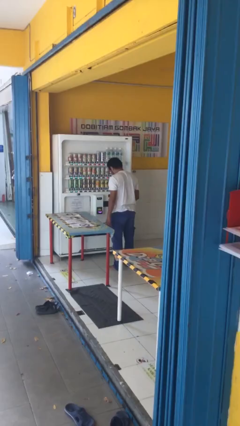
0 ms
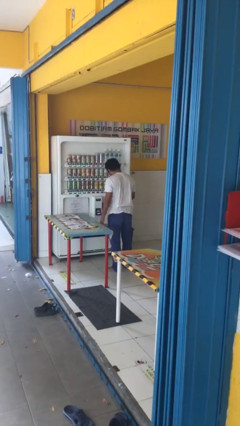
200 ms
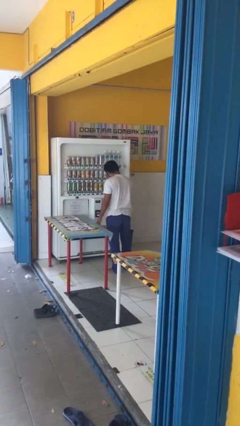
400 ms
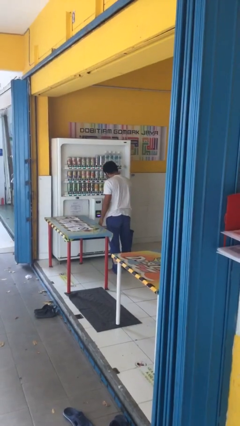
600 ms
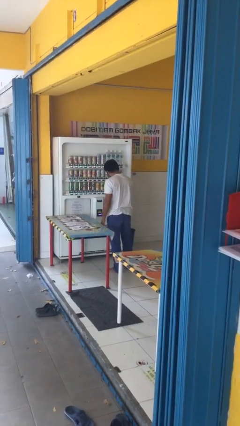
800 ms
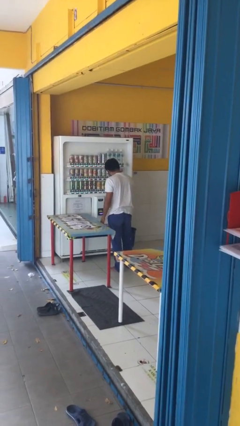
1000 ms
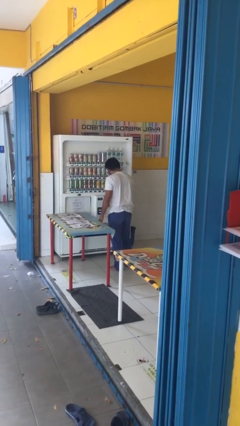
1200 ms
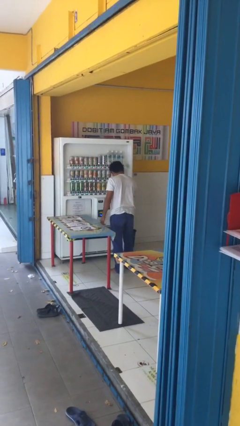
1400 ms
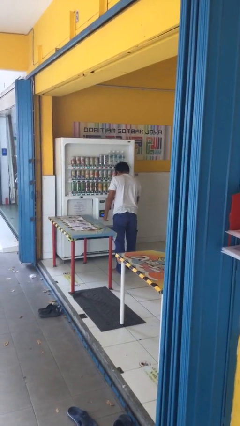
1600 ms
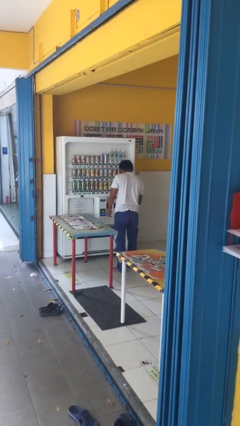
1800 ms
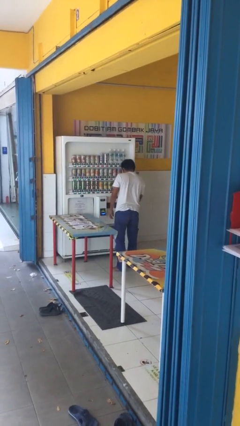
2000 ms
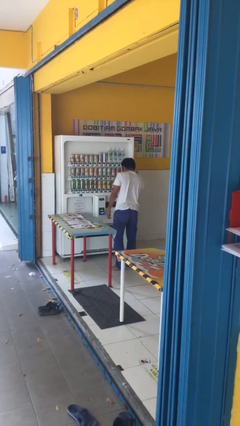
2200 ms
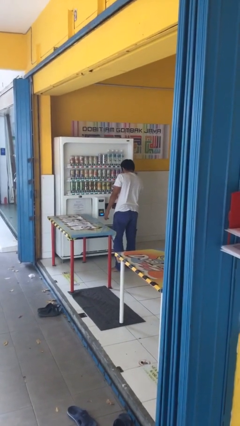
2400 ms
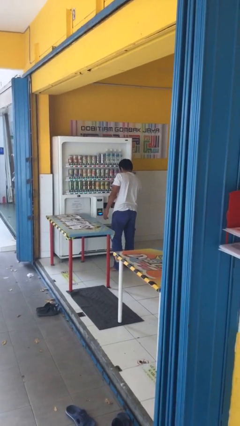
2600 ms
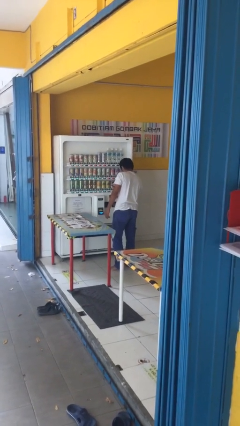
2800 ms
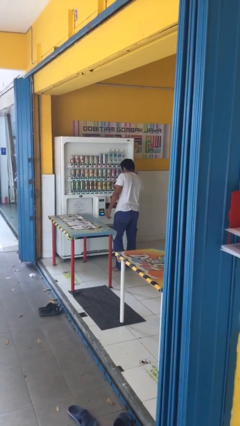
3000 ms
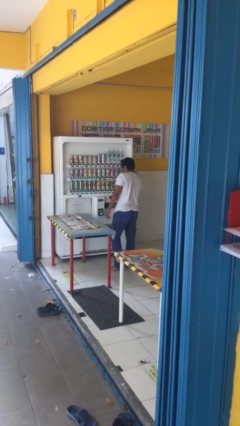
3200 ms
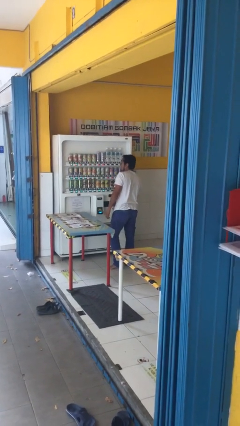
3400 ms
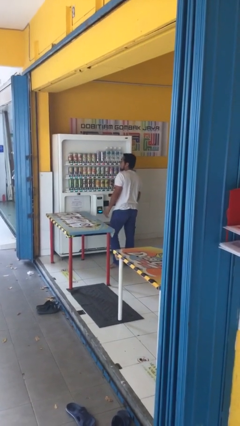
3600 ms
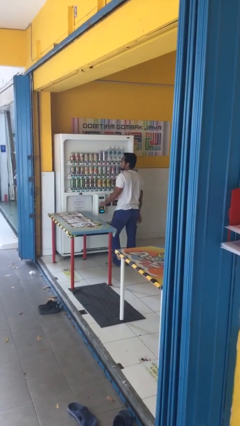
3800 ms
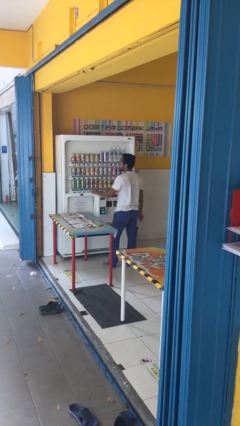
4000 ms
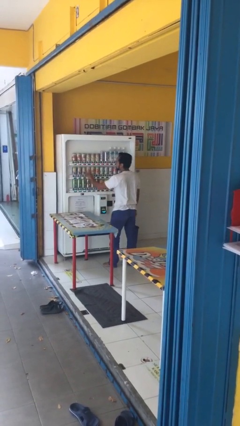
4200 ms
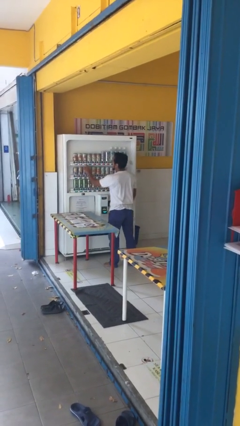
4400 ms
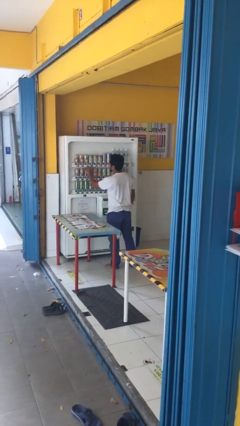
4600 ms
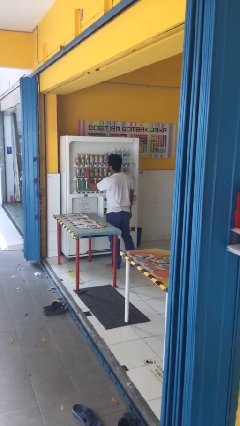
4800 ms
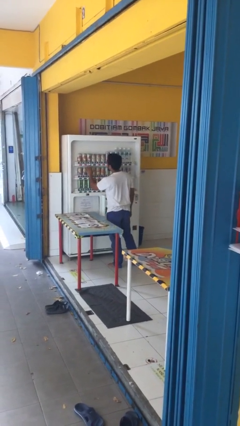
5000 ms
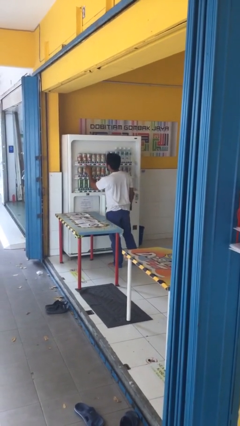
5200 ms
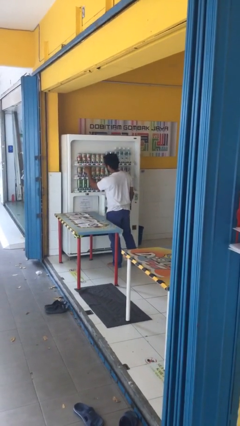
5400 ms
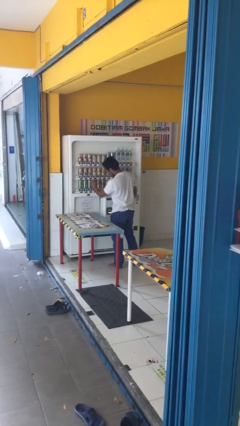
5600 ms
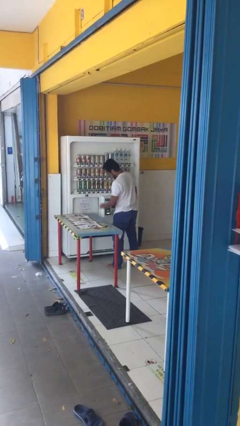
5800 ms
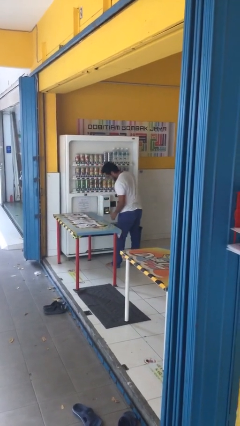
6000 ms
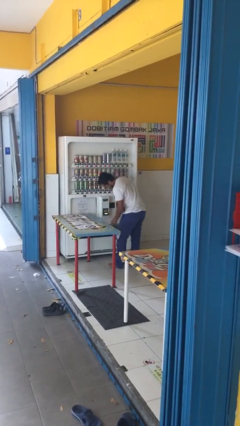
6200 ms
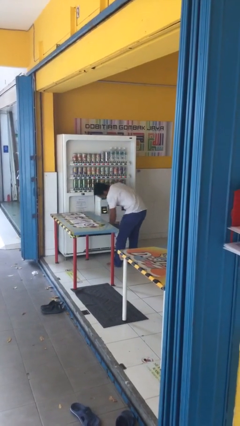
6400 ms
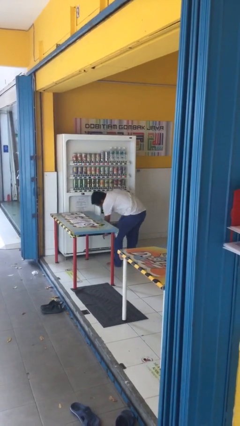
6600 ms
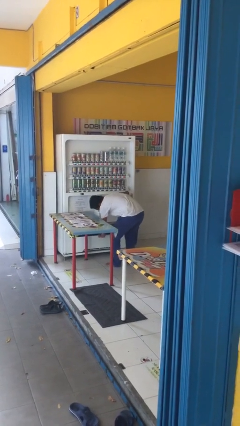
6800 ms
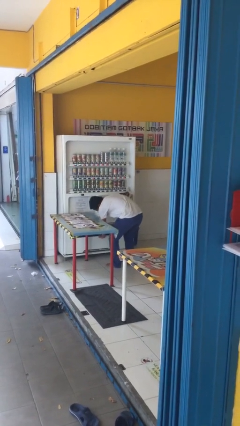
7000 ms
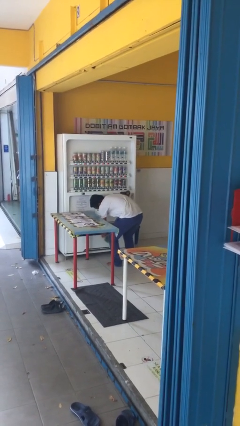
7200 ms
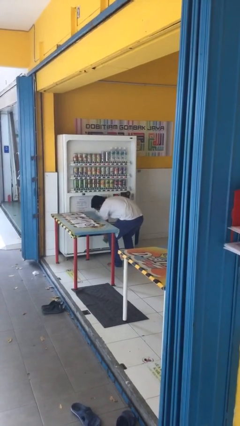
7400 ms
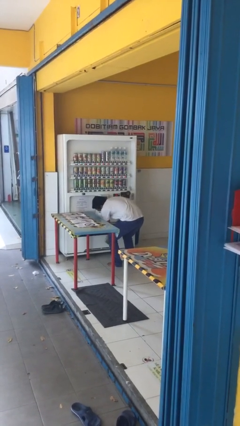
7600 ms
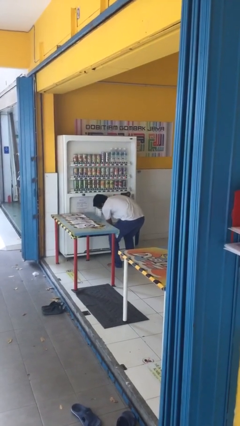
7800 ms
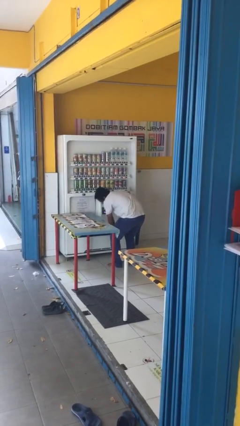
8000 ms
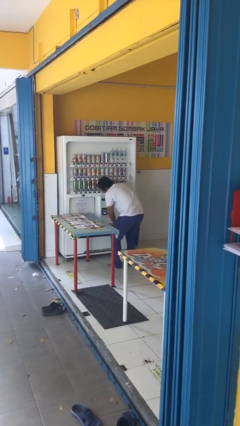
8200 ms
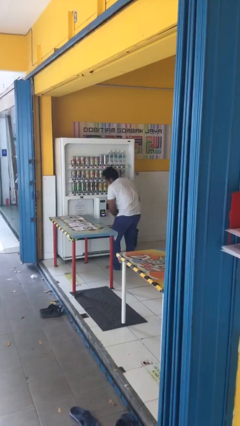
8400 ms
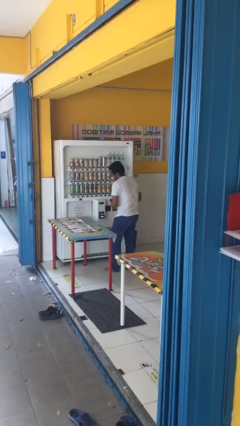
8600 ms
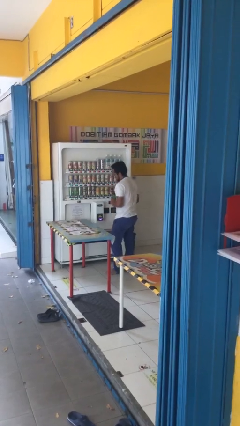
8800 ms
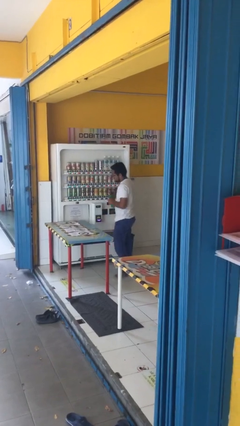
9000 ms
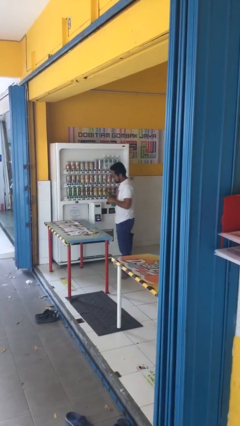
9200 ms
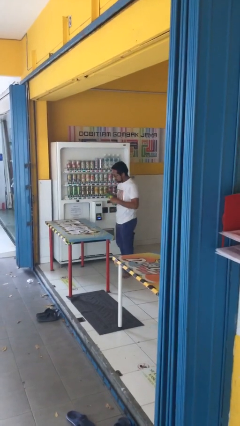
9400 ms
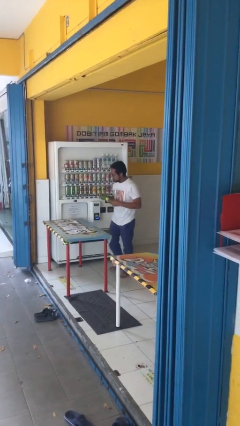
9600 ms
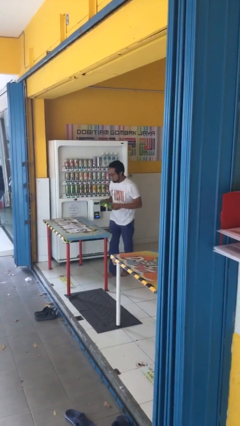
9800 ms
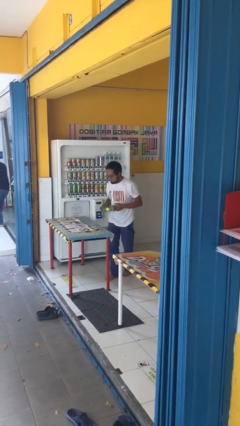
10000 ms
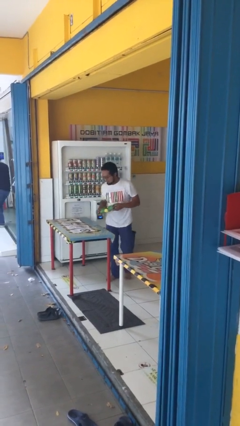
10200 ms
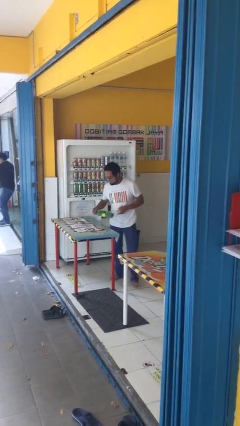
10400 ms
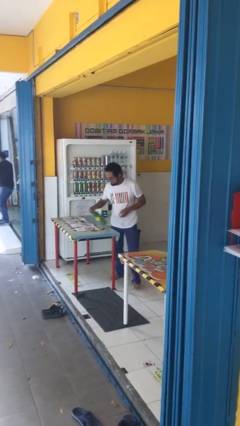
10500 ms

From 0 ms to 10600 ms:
person purchases from machine

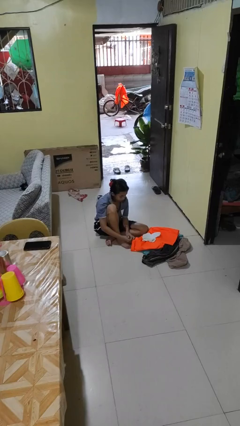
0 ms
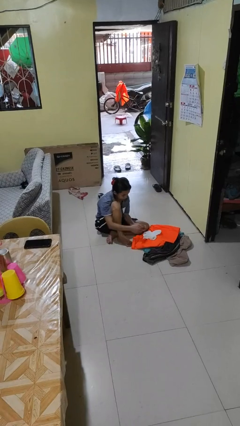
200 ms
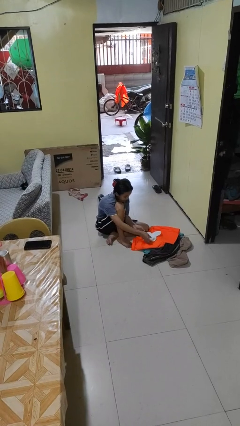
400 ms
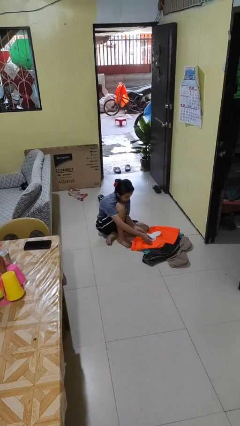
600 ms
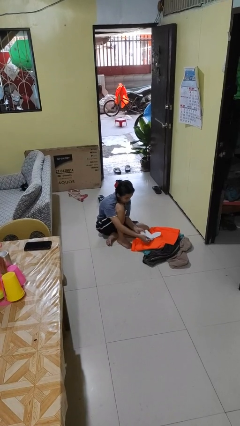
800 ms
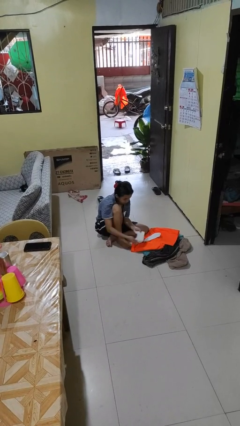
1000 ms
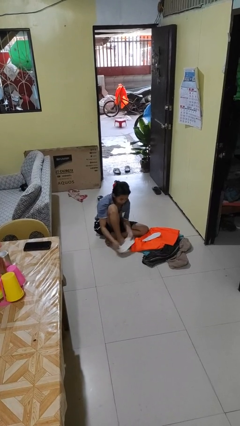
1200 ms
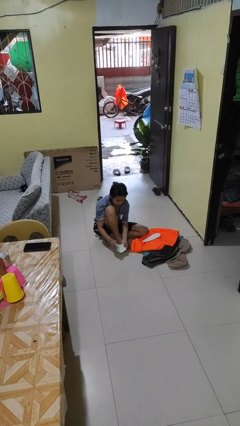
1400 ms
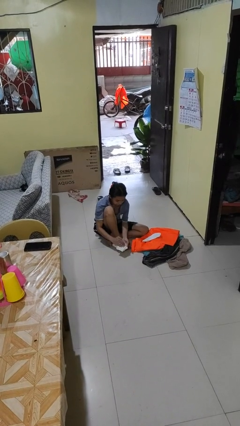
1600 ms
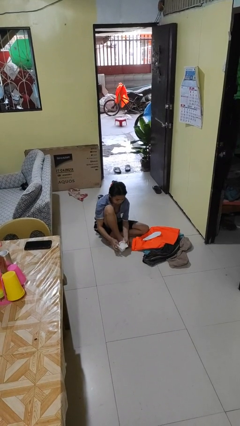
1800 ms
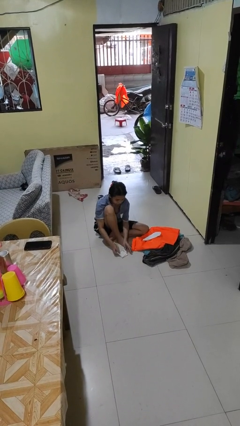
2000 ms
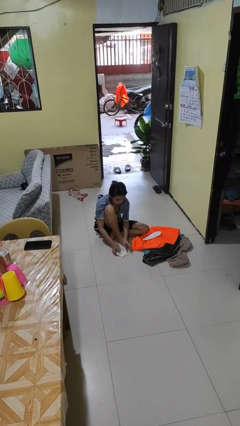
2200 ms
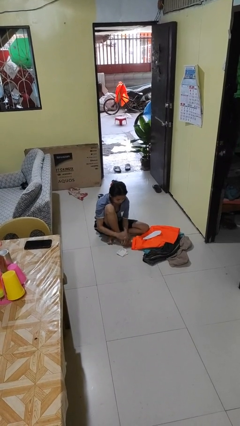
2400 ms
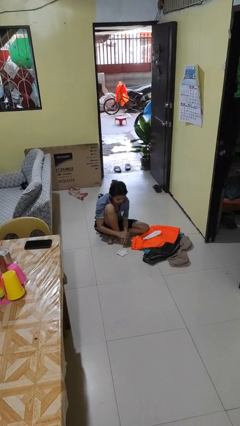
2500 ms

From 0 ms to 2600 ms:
person folds socks

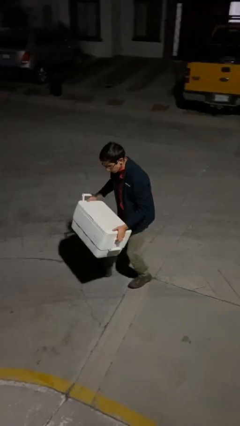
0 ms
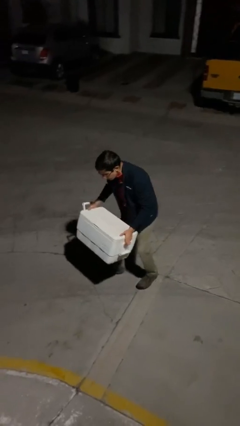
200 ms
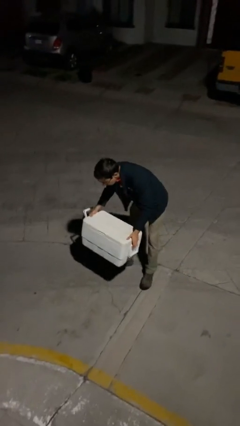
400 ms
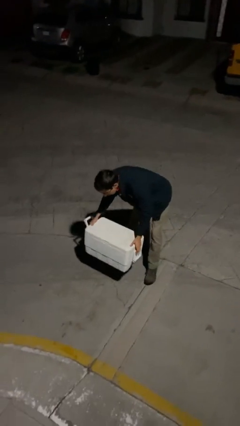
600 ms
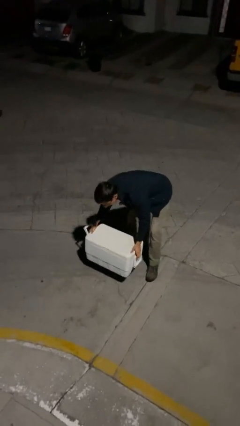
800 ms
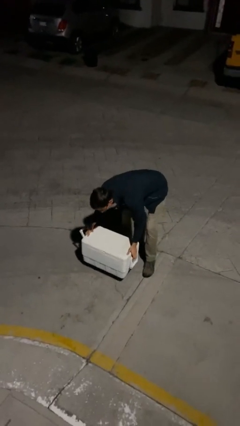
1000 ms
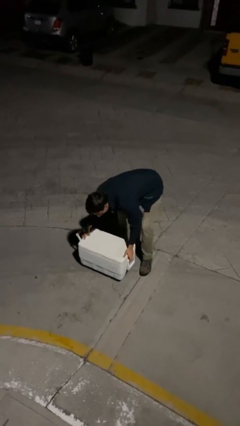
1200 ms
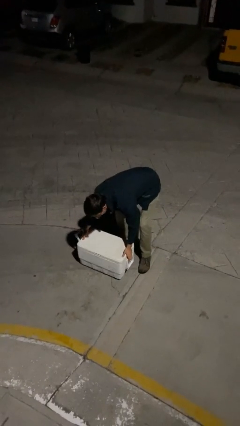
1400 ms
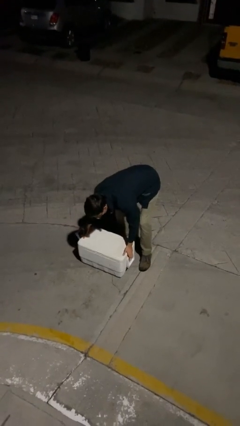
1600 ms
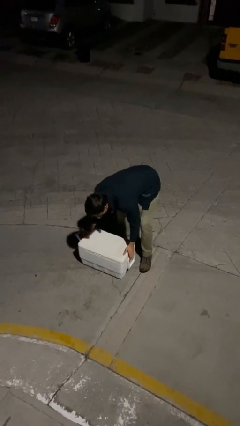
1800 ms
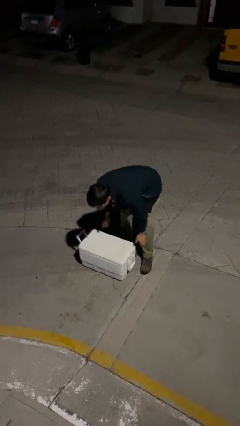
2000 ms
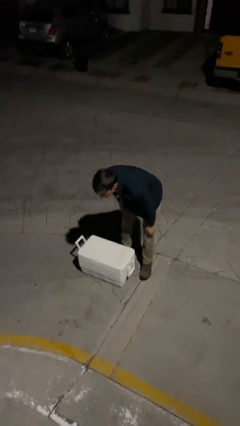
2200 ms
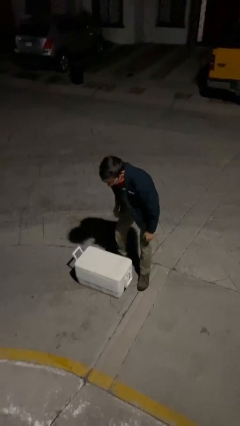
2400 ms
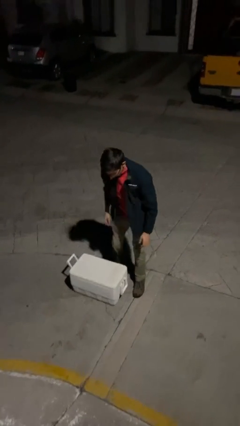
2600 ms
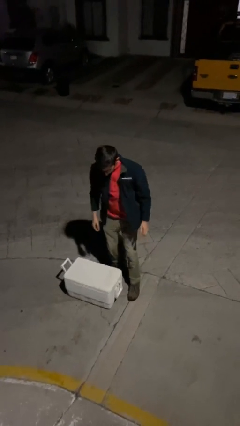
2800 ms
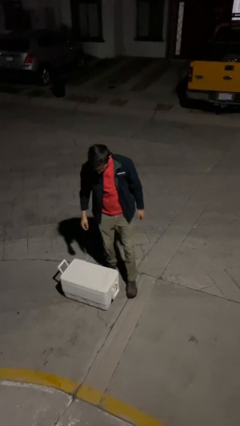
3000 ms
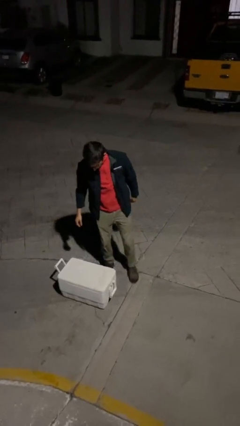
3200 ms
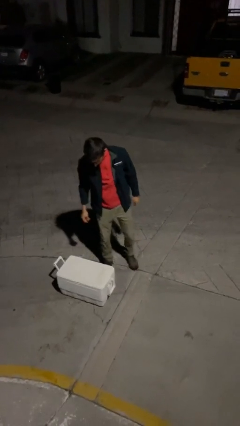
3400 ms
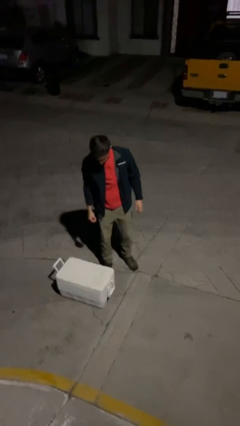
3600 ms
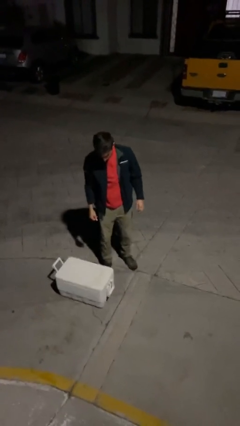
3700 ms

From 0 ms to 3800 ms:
person puts down object on floor

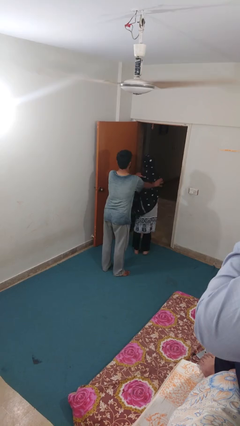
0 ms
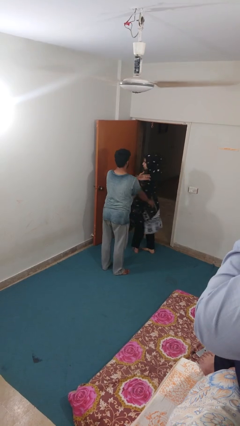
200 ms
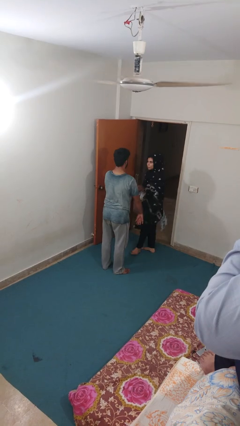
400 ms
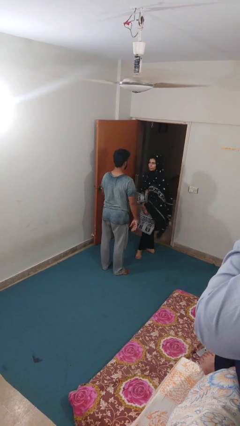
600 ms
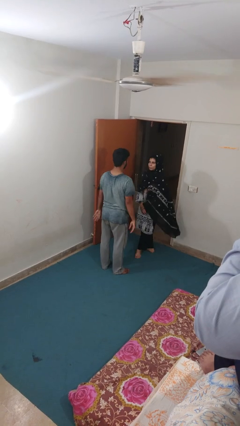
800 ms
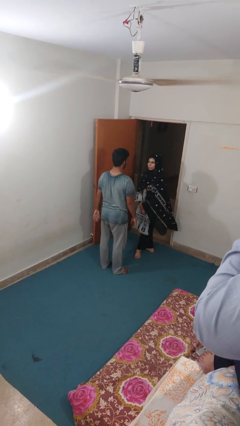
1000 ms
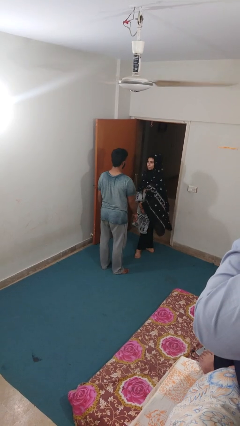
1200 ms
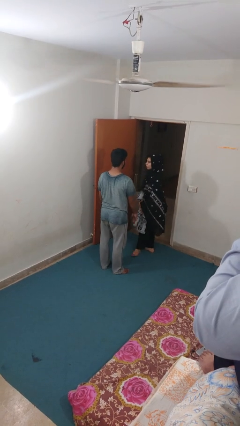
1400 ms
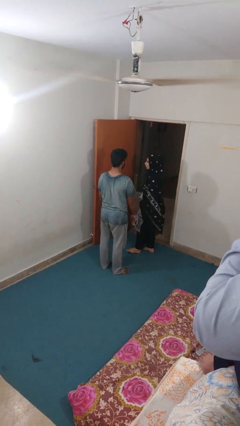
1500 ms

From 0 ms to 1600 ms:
person spins person around
